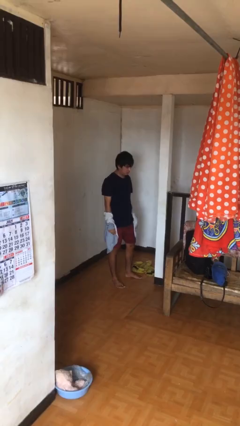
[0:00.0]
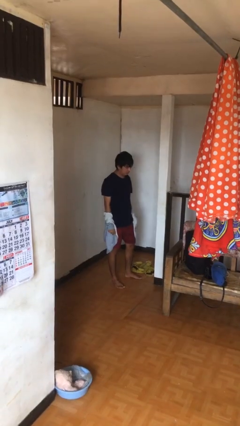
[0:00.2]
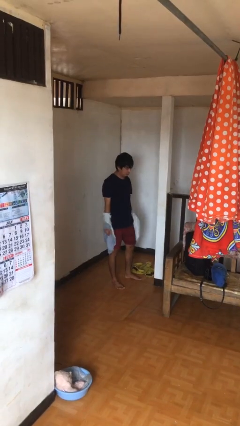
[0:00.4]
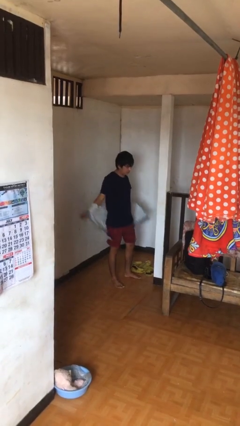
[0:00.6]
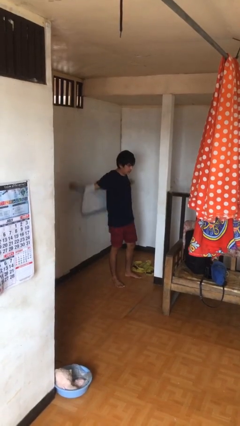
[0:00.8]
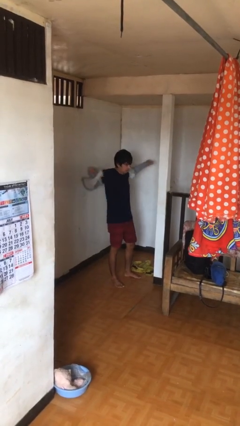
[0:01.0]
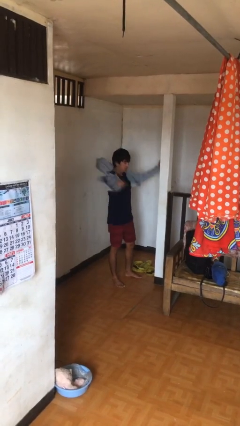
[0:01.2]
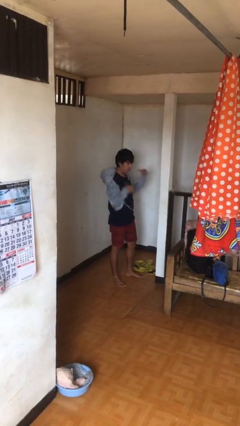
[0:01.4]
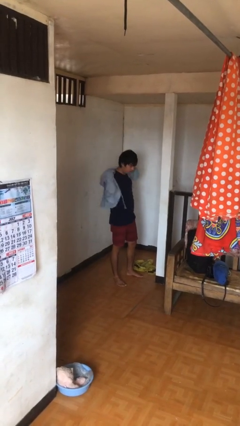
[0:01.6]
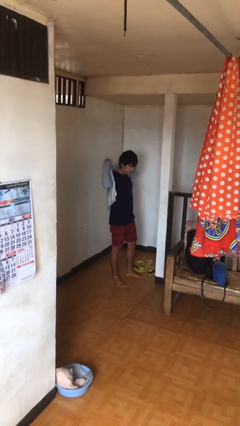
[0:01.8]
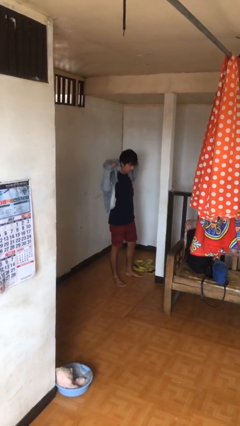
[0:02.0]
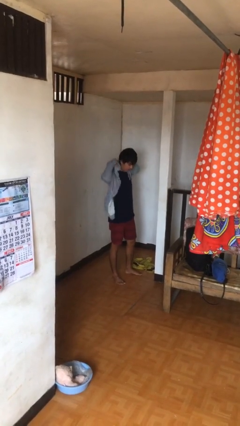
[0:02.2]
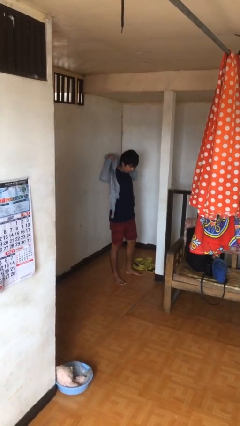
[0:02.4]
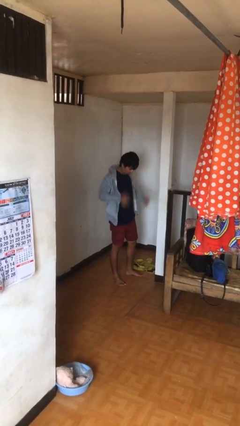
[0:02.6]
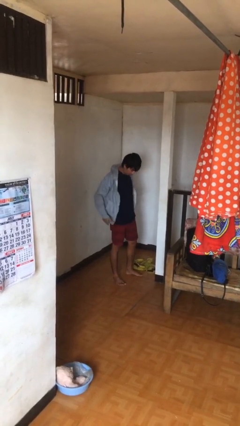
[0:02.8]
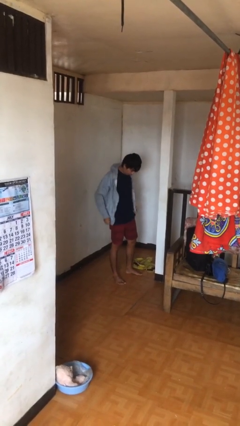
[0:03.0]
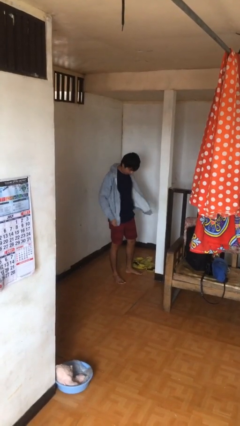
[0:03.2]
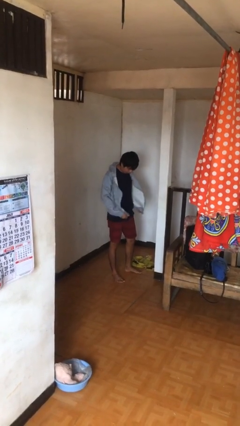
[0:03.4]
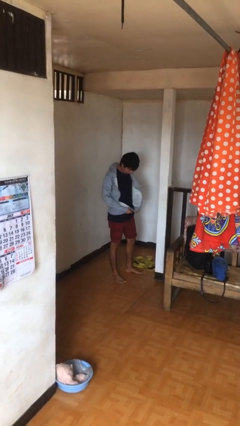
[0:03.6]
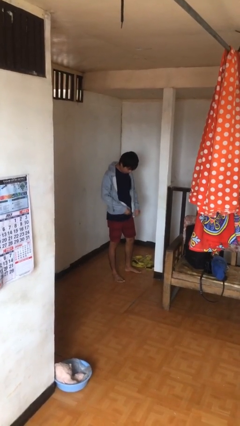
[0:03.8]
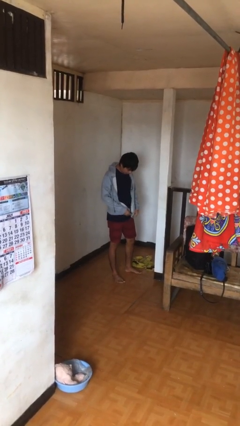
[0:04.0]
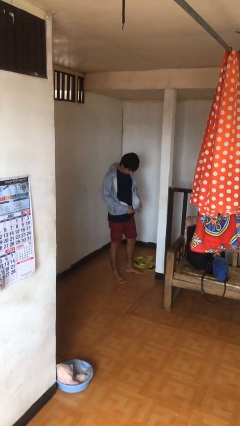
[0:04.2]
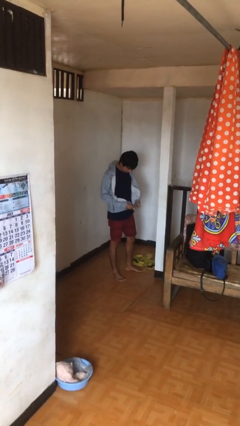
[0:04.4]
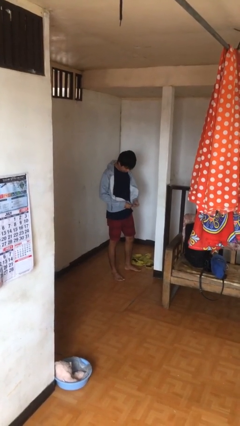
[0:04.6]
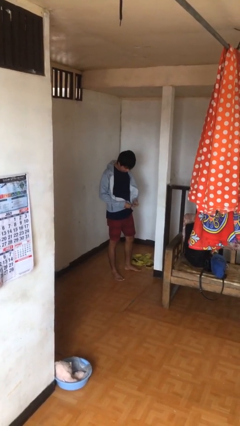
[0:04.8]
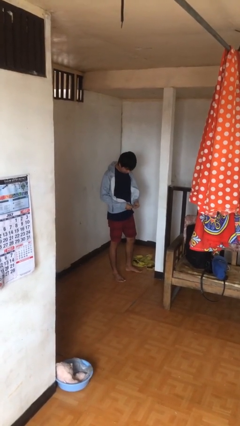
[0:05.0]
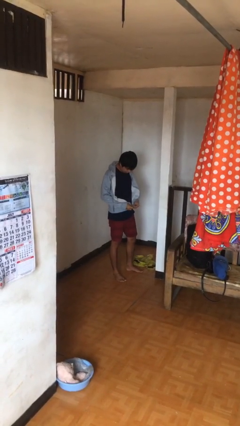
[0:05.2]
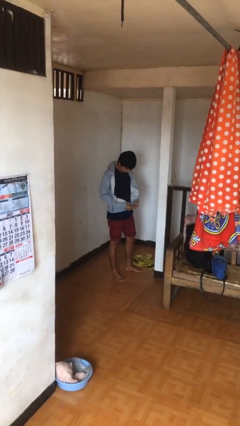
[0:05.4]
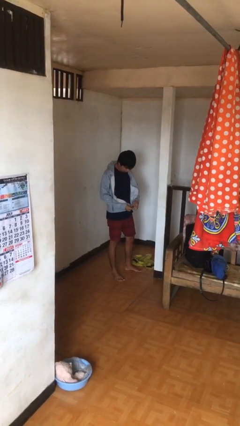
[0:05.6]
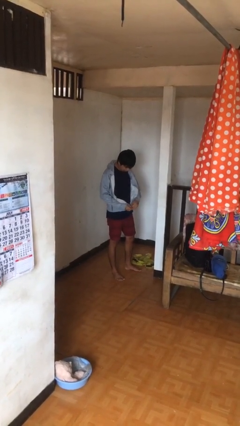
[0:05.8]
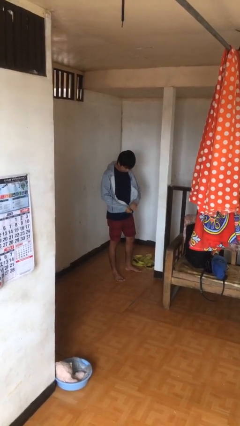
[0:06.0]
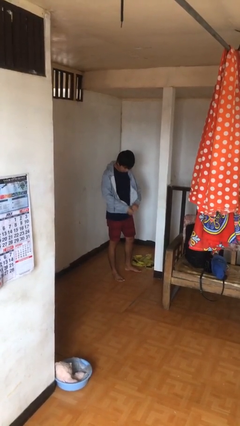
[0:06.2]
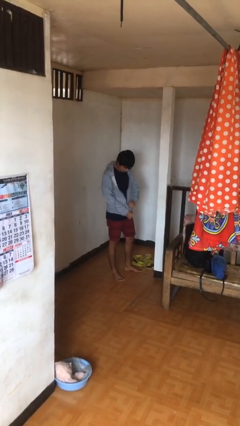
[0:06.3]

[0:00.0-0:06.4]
person puts on jacket

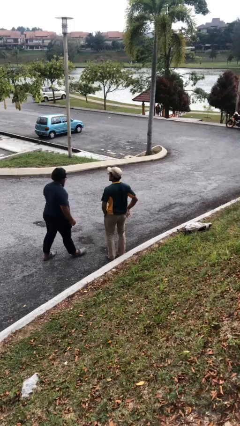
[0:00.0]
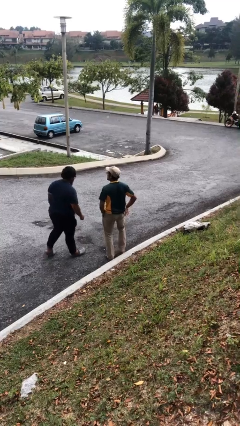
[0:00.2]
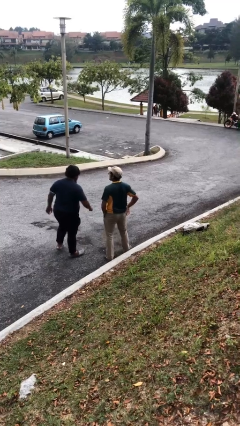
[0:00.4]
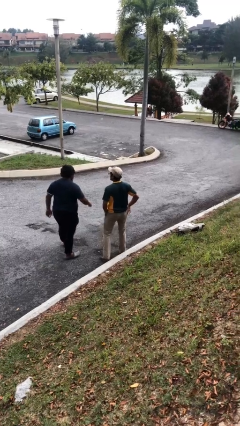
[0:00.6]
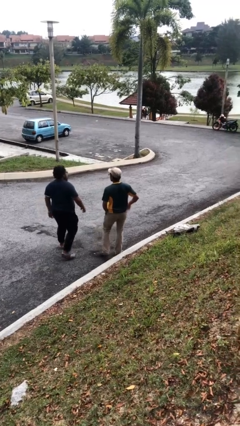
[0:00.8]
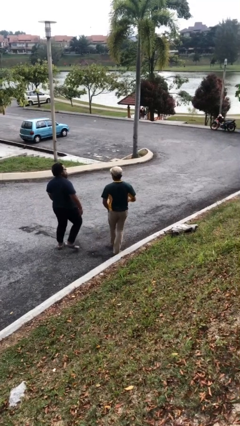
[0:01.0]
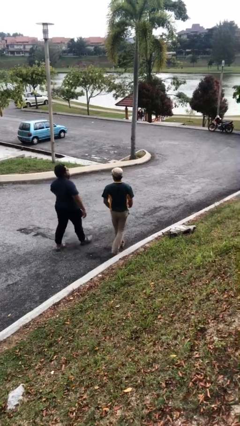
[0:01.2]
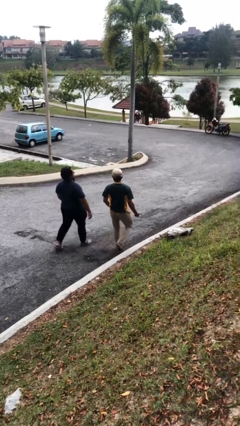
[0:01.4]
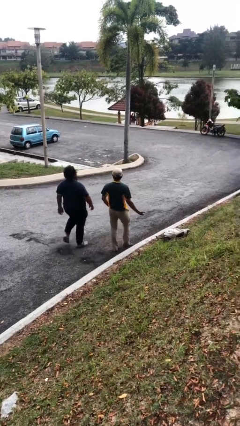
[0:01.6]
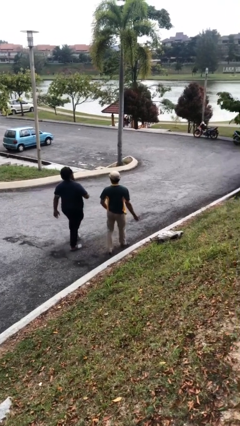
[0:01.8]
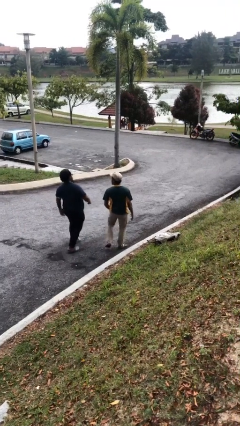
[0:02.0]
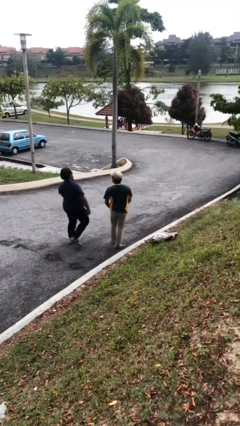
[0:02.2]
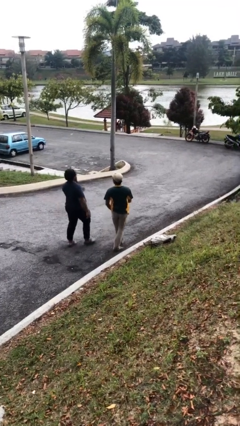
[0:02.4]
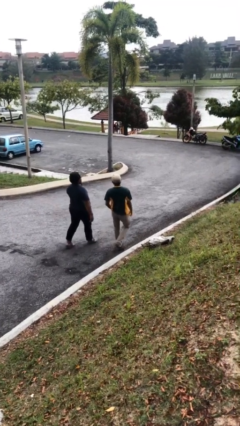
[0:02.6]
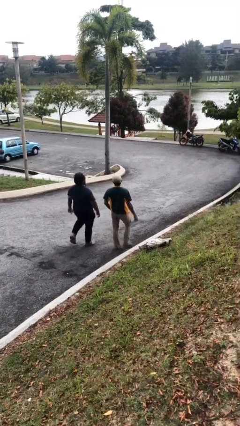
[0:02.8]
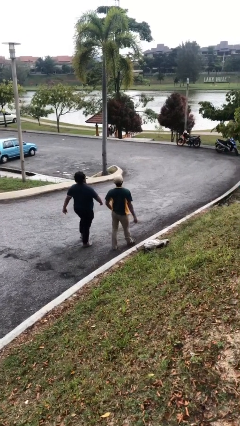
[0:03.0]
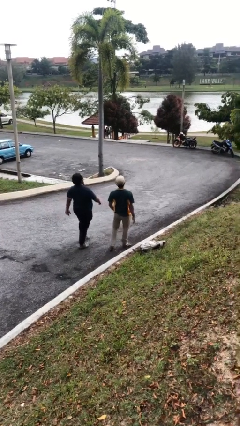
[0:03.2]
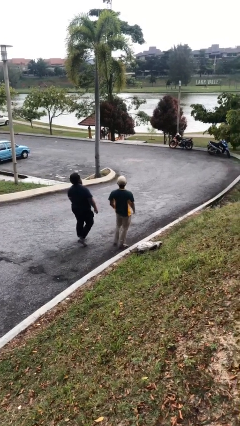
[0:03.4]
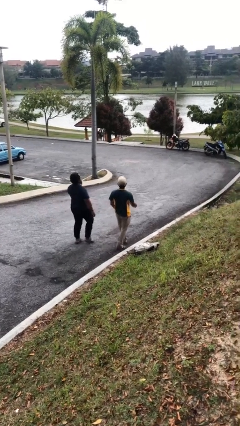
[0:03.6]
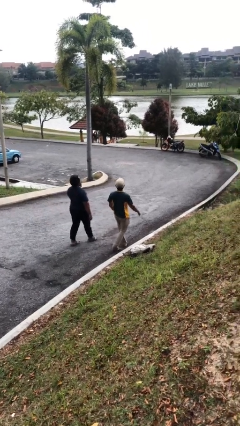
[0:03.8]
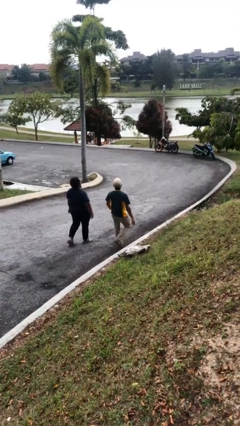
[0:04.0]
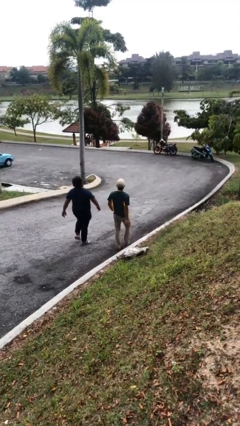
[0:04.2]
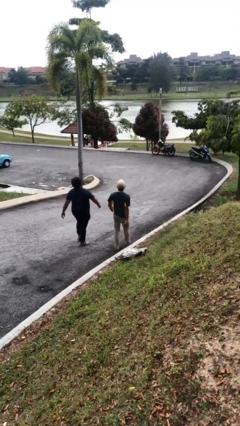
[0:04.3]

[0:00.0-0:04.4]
person talks to person

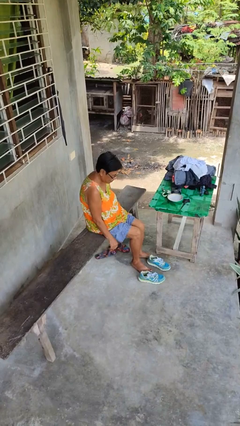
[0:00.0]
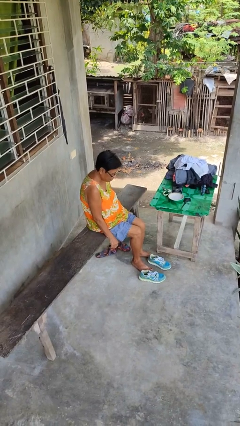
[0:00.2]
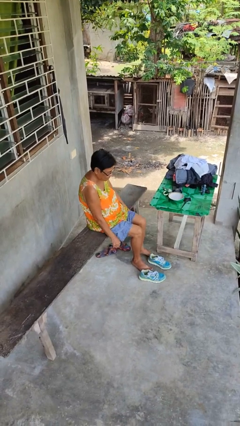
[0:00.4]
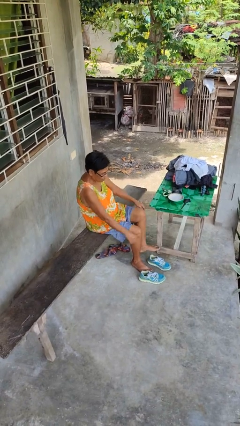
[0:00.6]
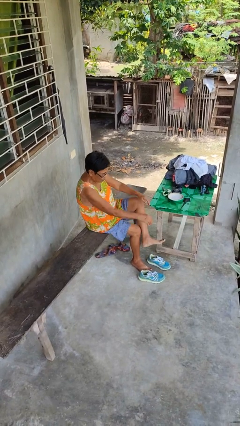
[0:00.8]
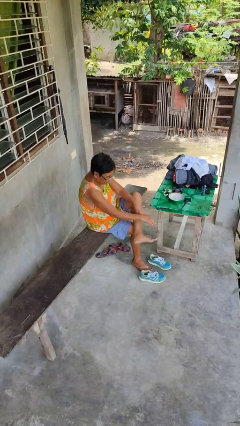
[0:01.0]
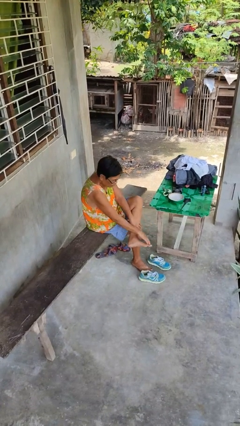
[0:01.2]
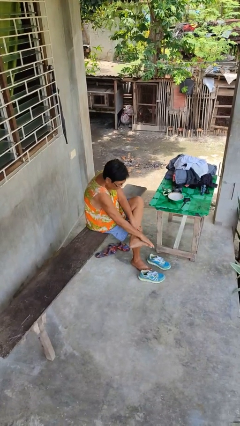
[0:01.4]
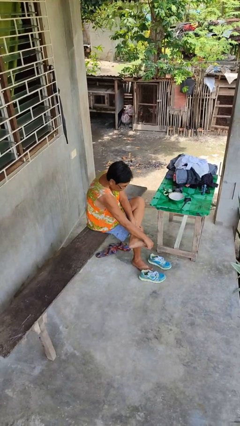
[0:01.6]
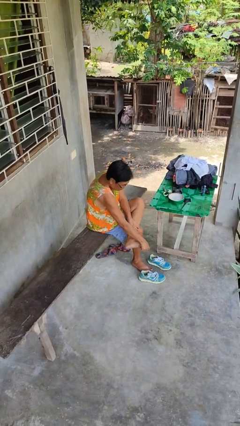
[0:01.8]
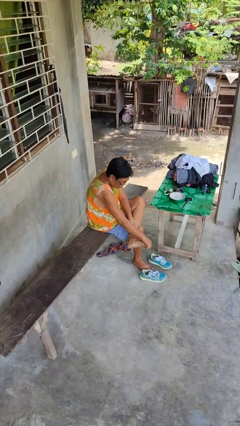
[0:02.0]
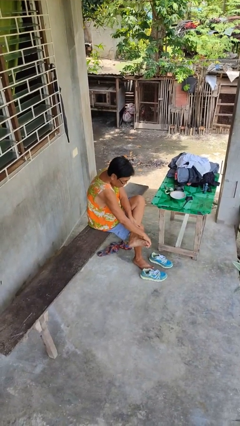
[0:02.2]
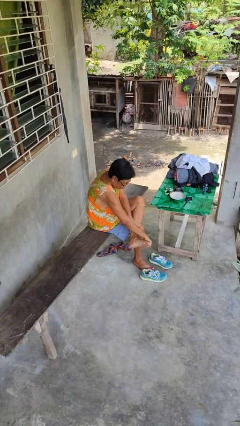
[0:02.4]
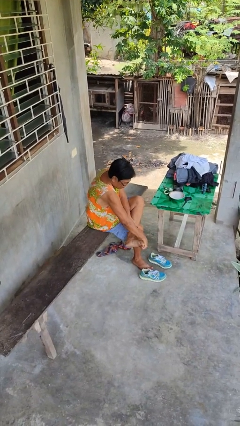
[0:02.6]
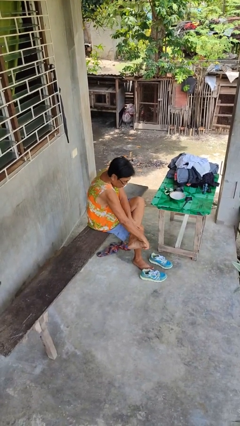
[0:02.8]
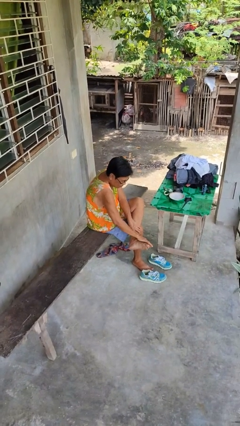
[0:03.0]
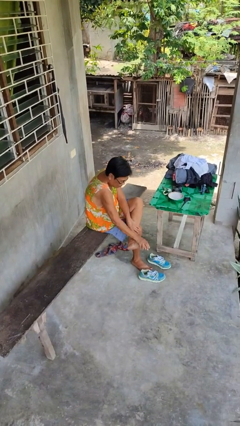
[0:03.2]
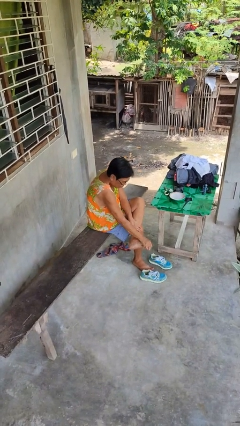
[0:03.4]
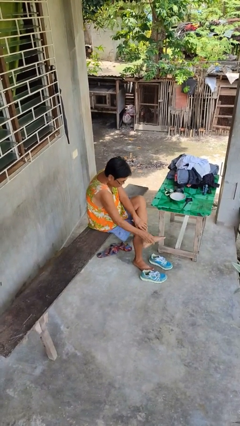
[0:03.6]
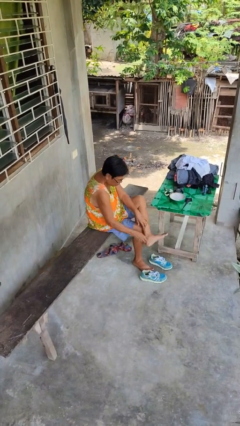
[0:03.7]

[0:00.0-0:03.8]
person rubs foot

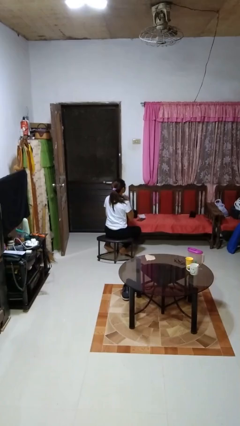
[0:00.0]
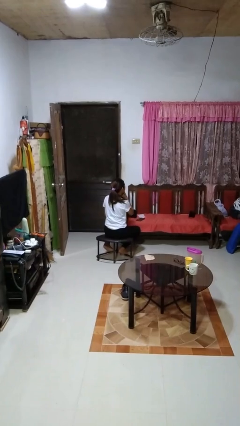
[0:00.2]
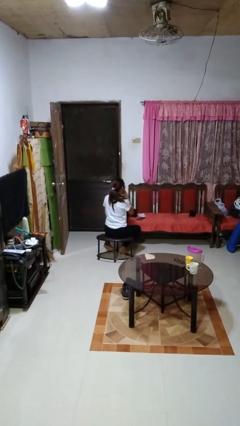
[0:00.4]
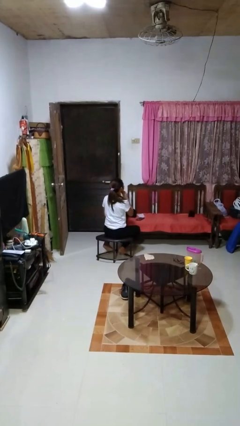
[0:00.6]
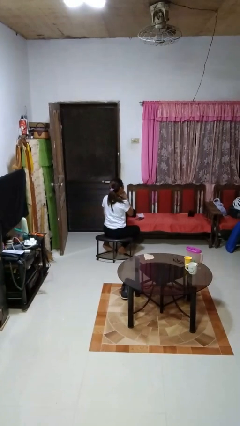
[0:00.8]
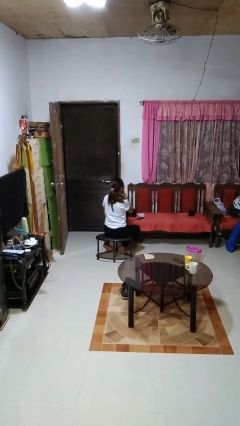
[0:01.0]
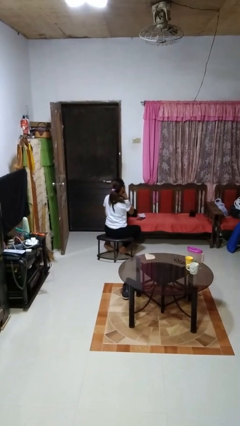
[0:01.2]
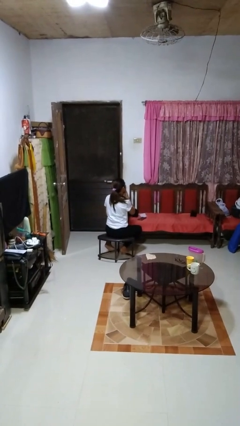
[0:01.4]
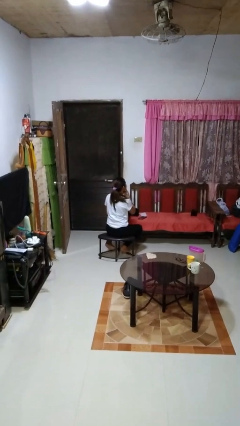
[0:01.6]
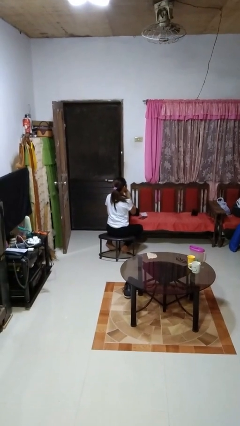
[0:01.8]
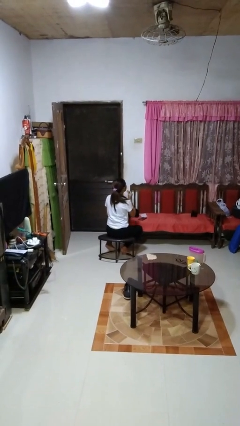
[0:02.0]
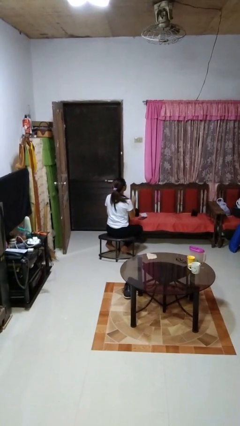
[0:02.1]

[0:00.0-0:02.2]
person strokes chin

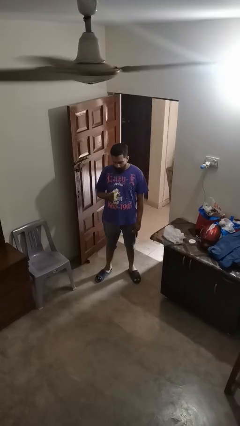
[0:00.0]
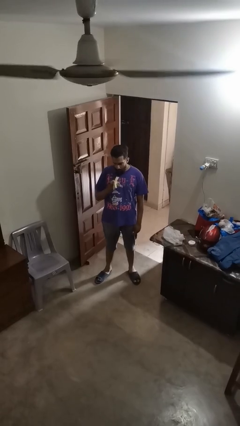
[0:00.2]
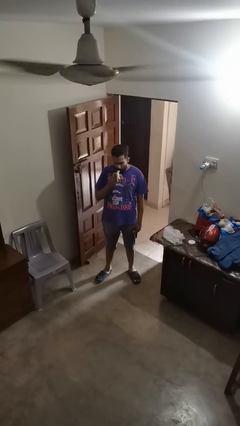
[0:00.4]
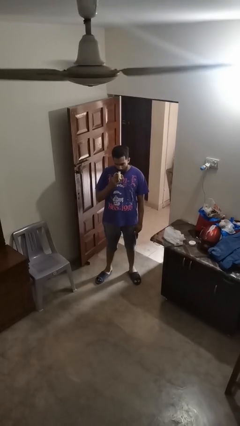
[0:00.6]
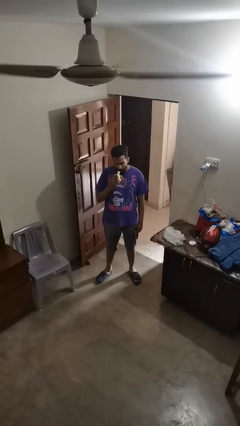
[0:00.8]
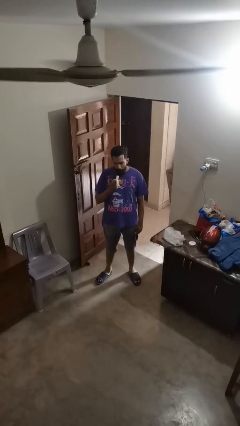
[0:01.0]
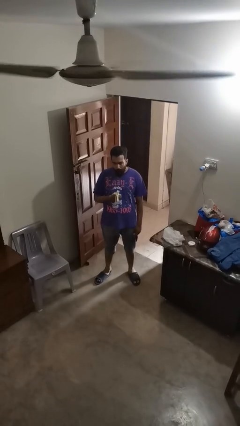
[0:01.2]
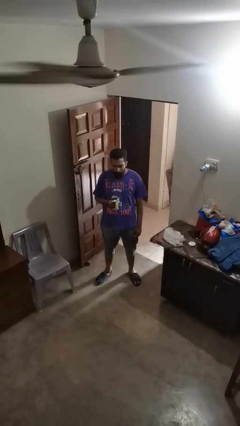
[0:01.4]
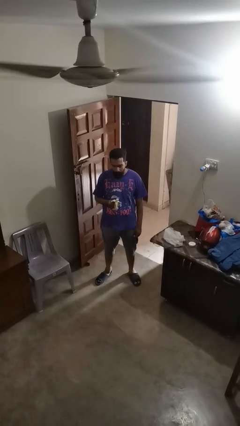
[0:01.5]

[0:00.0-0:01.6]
person eats banana
